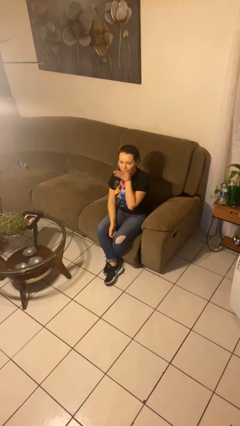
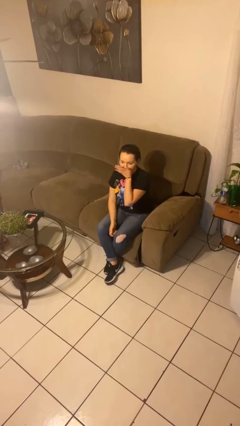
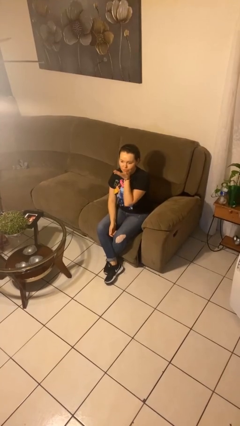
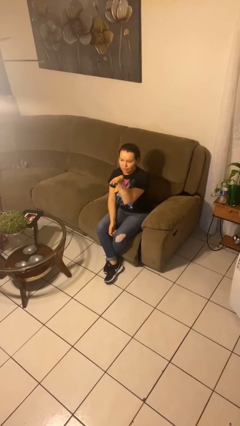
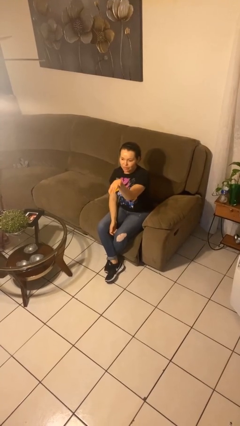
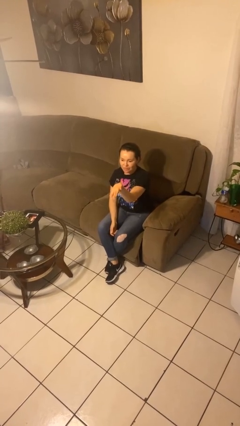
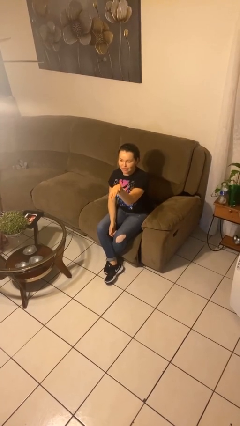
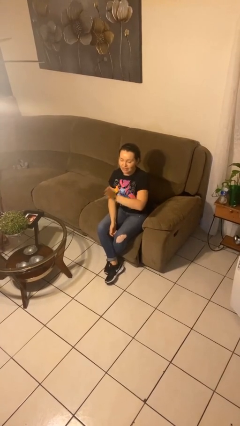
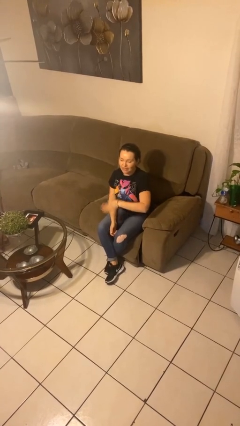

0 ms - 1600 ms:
person gestures blow kiss

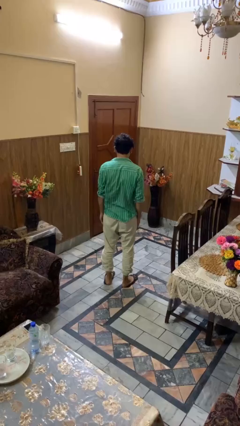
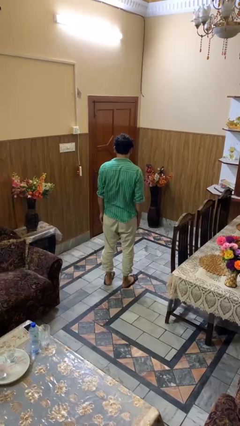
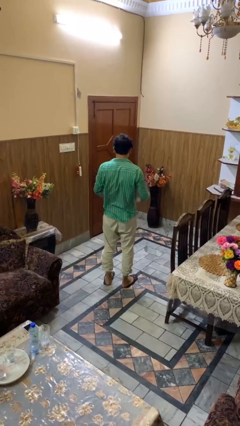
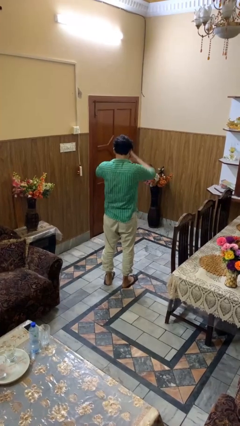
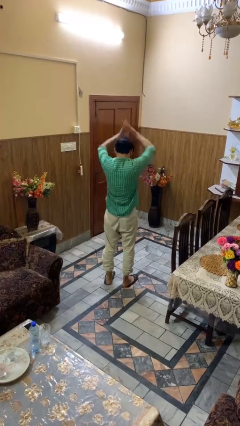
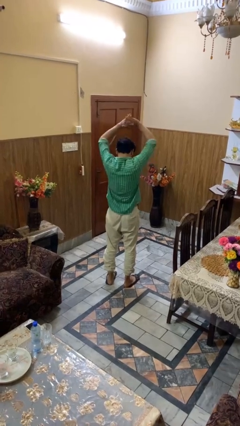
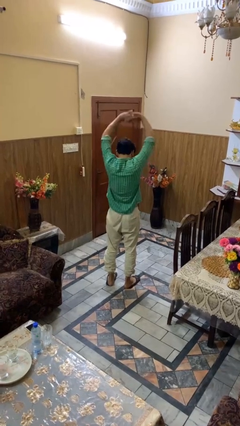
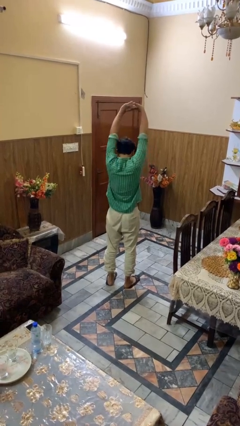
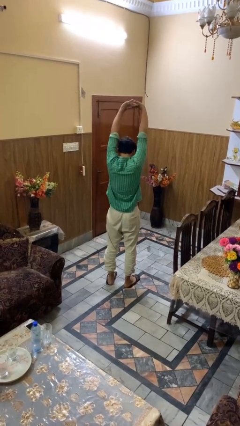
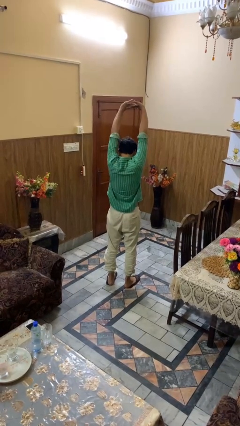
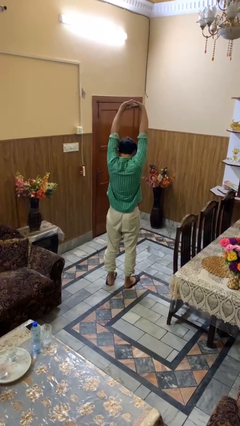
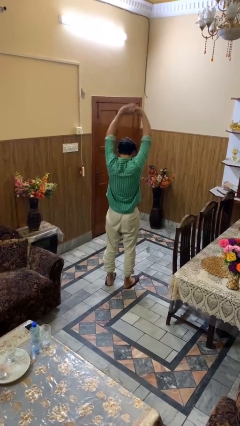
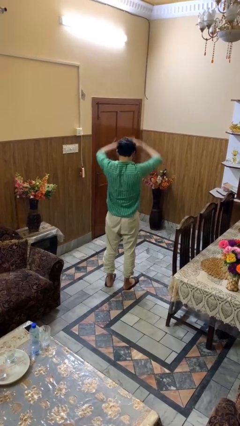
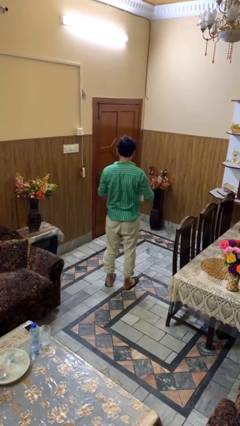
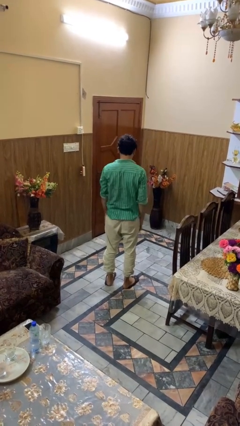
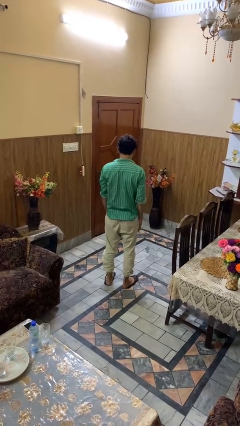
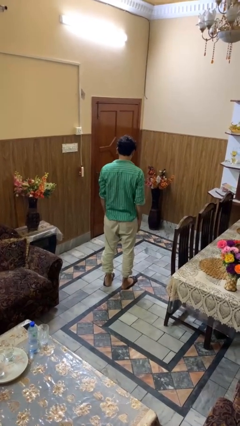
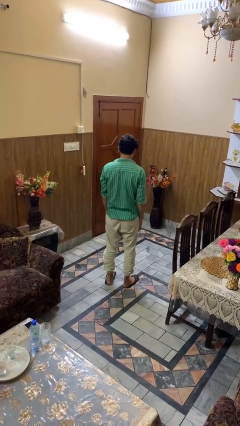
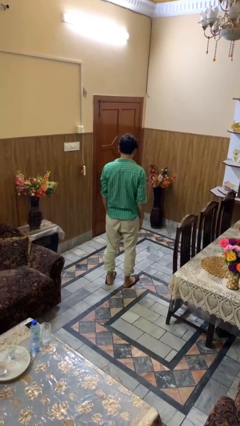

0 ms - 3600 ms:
person stretches arms over head

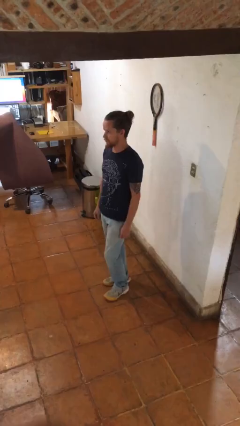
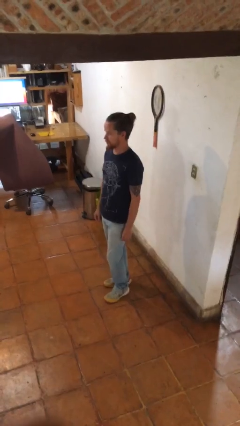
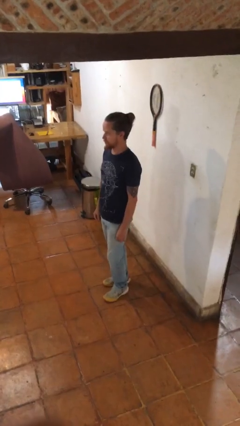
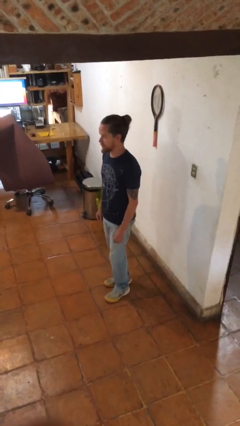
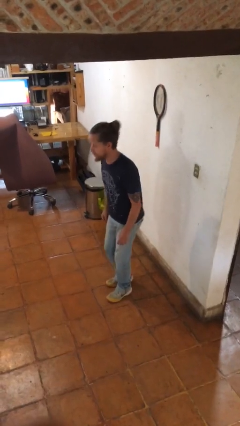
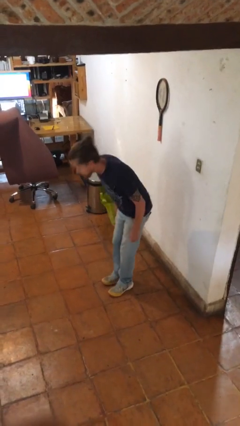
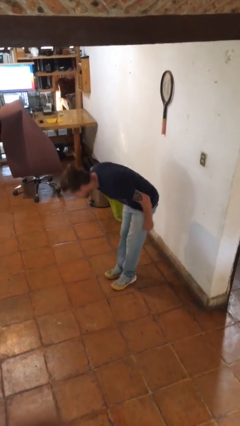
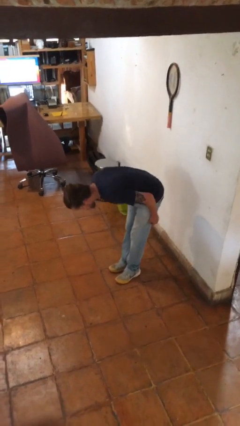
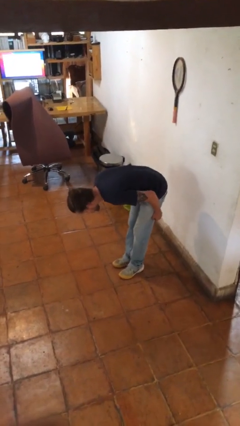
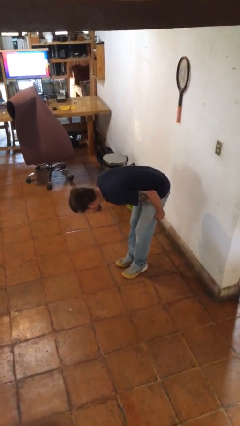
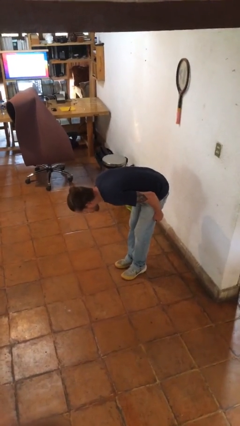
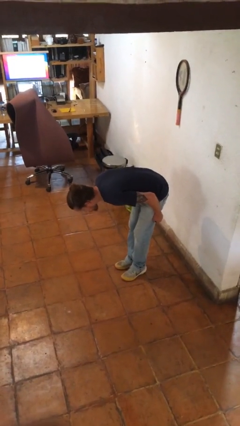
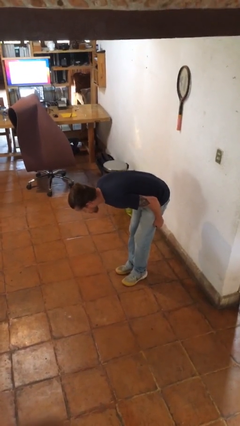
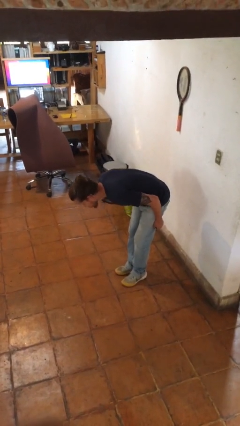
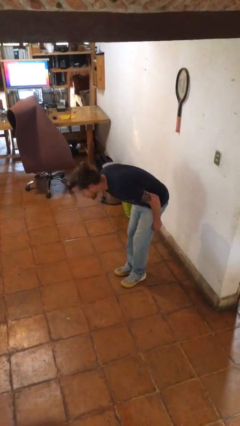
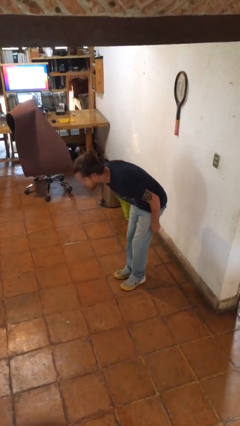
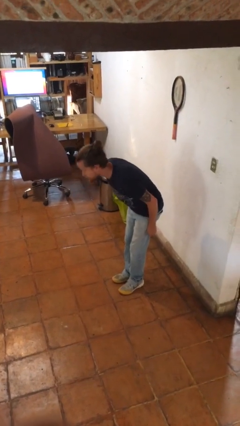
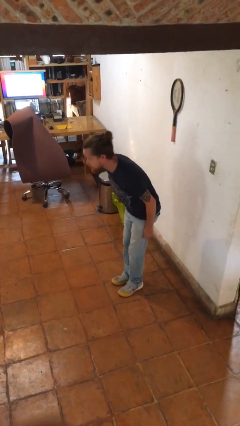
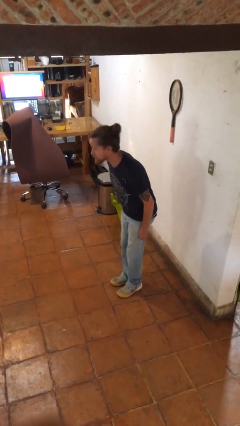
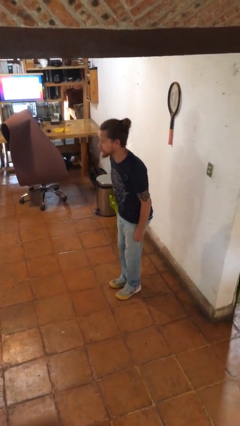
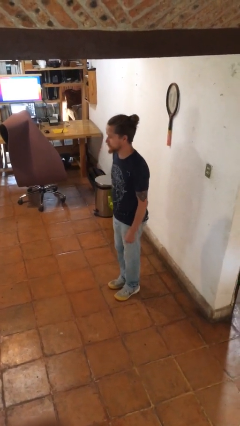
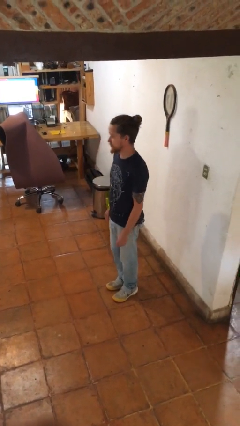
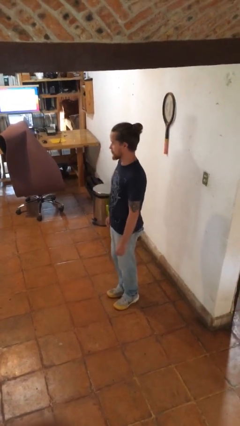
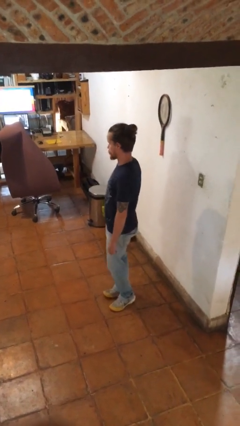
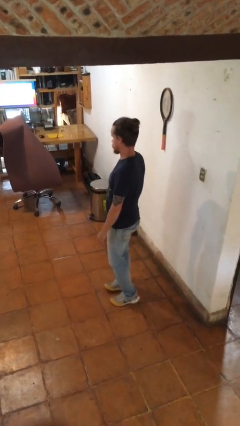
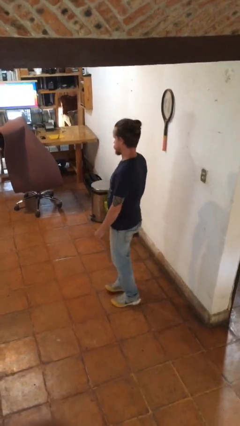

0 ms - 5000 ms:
person bows

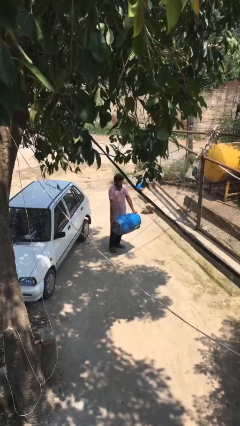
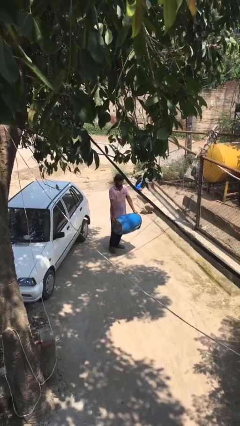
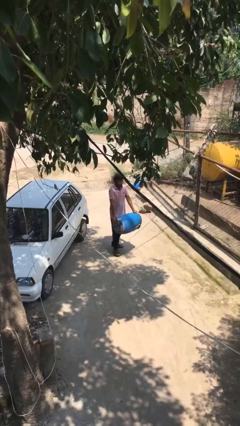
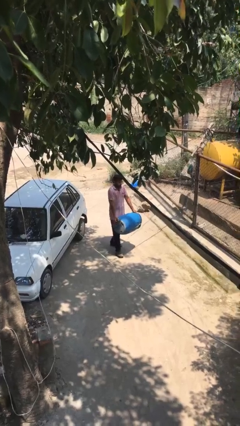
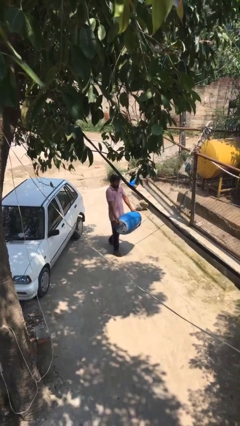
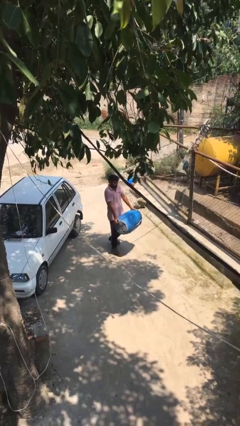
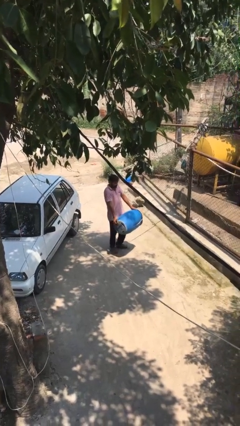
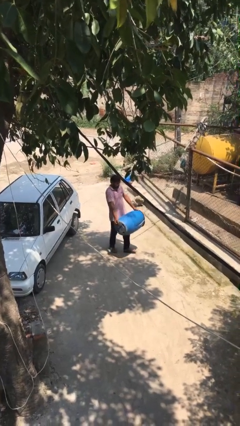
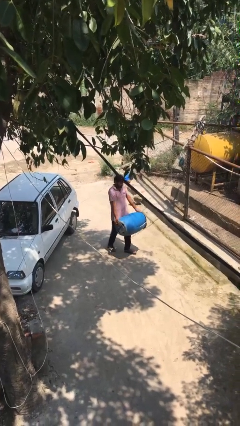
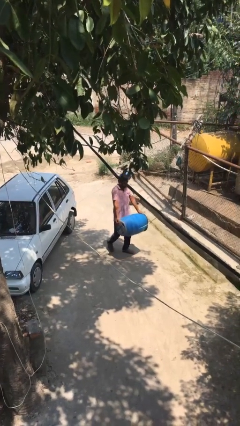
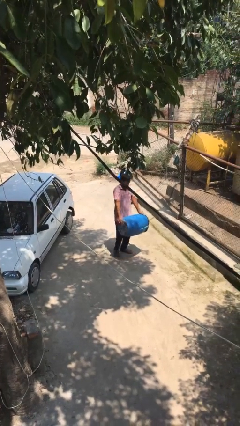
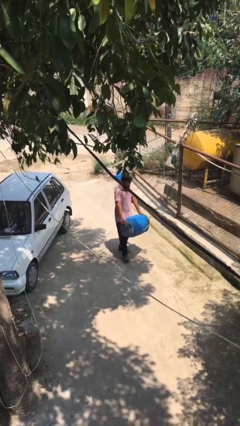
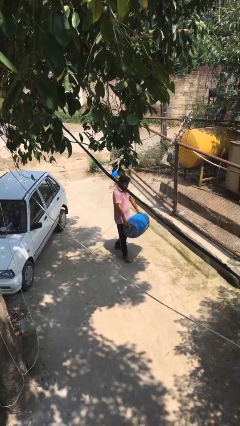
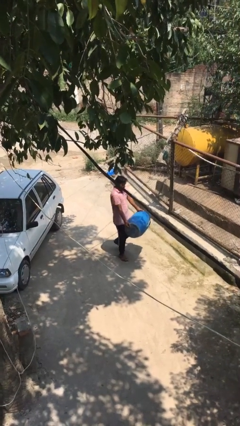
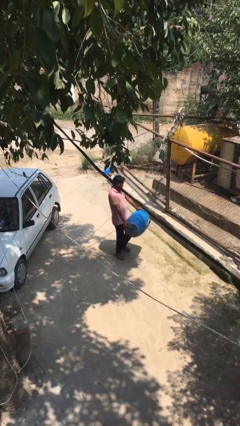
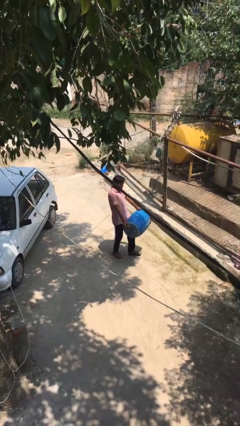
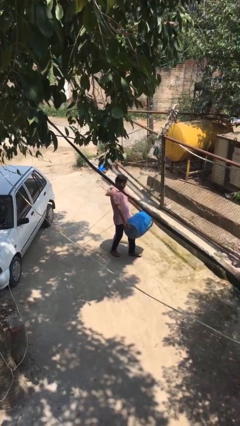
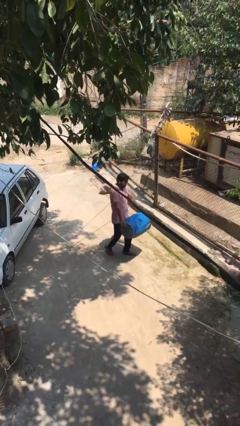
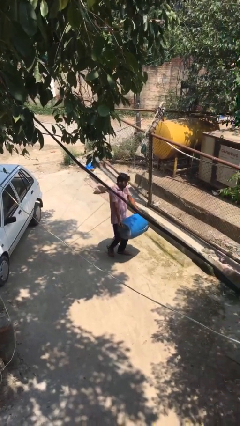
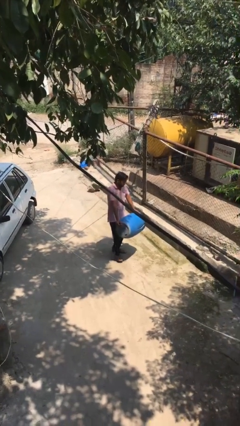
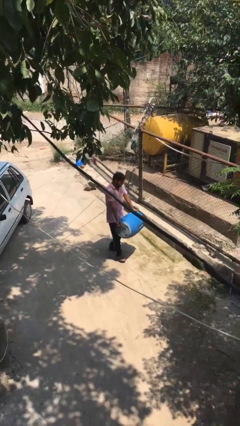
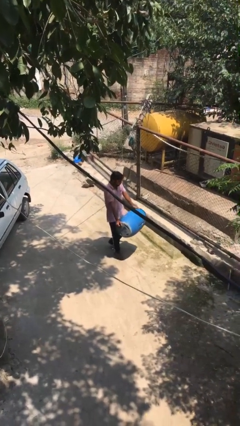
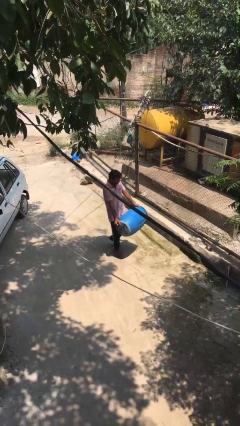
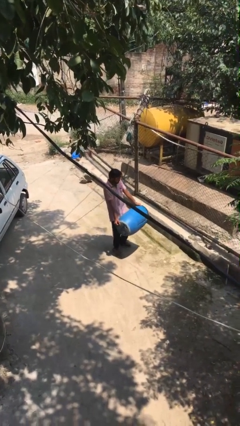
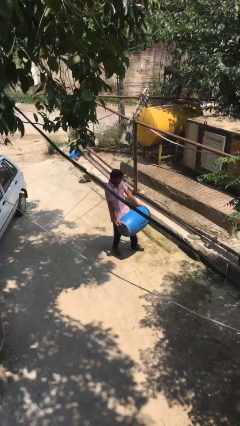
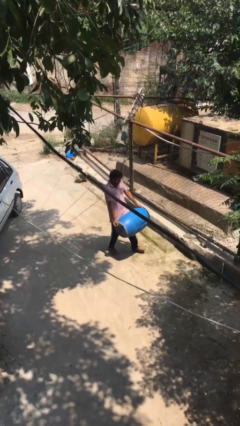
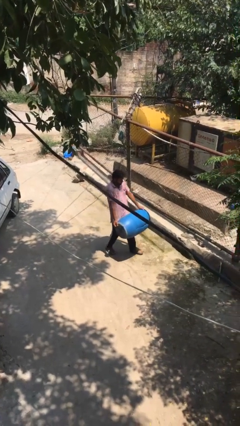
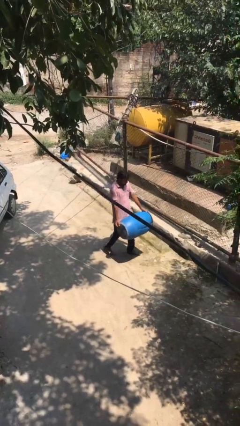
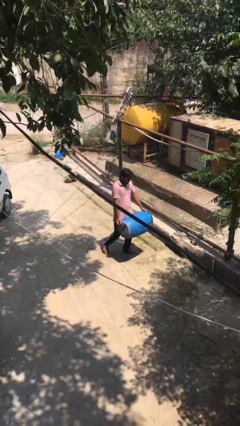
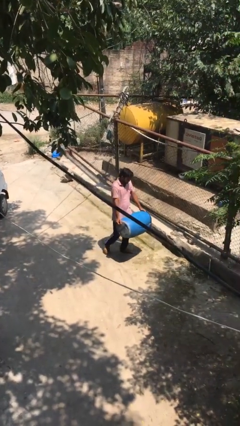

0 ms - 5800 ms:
person carries heavy object

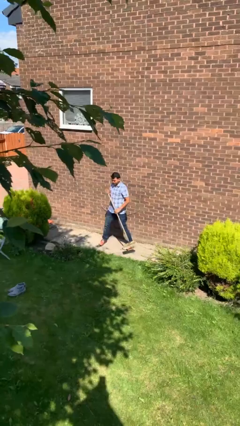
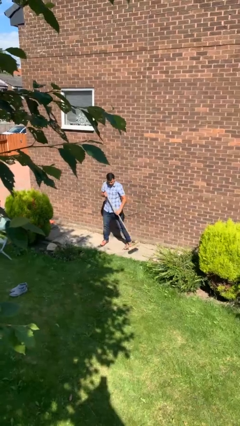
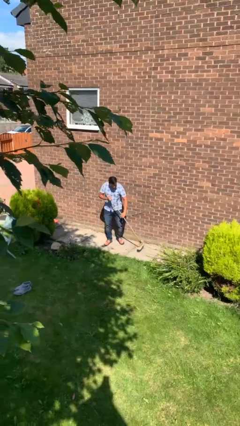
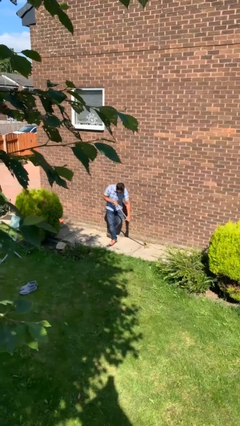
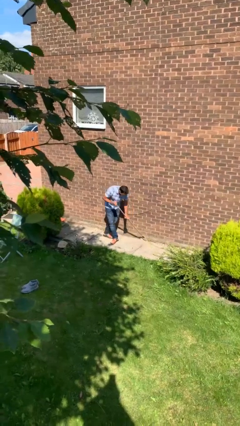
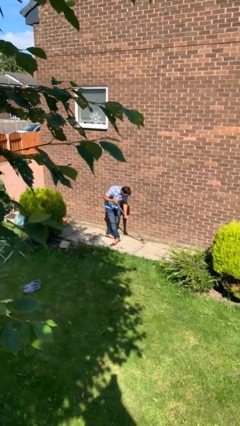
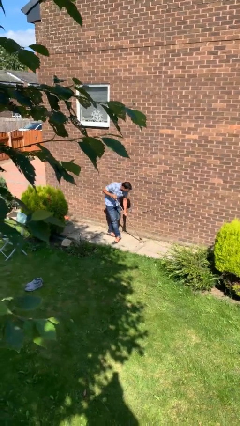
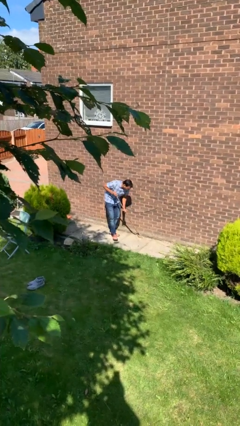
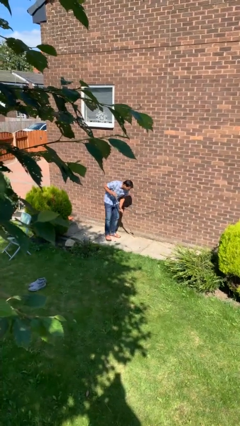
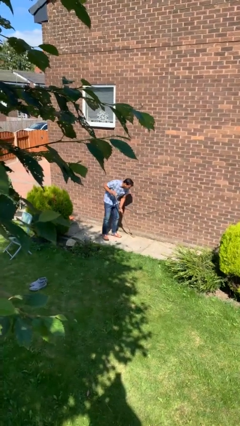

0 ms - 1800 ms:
person sweeps floor
